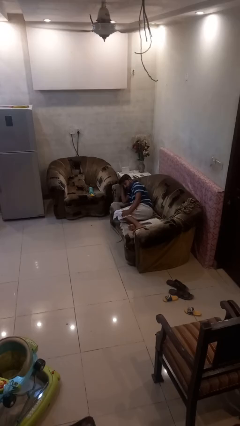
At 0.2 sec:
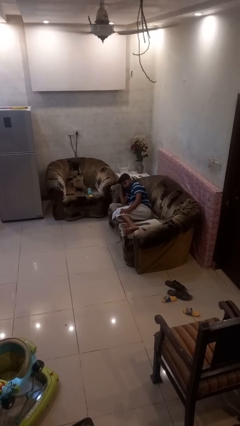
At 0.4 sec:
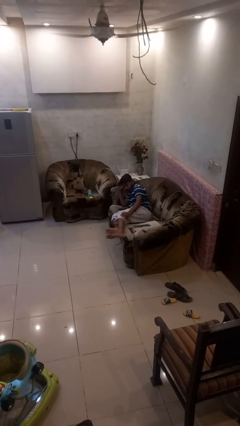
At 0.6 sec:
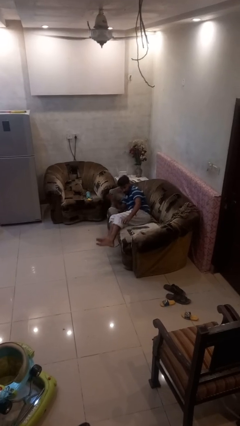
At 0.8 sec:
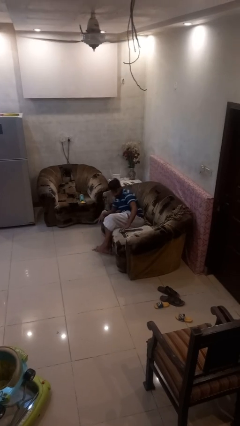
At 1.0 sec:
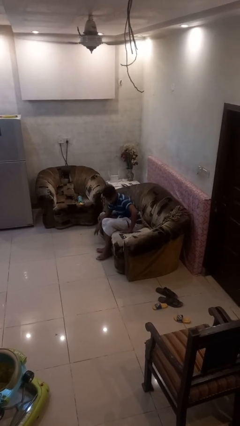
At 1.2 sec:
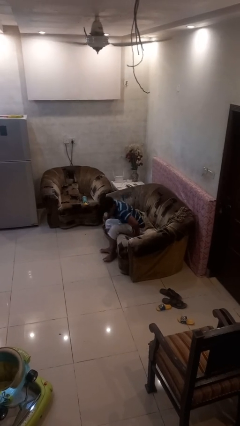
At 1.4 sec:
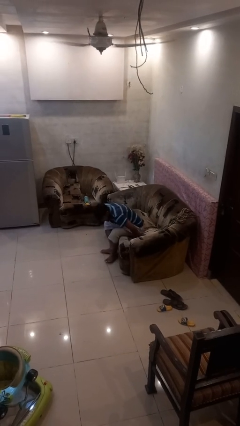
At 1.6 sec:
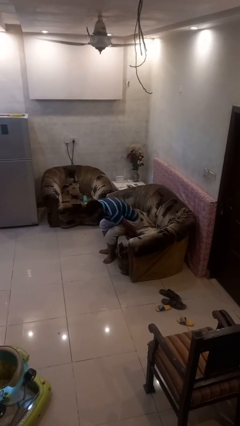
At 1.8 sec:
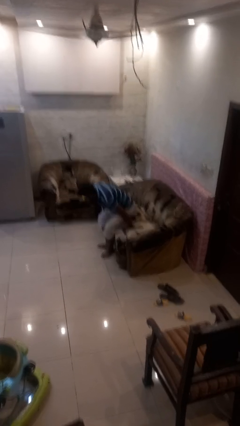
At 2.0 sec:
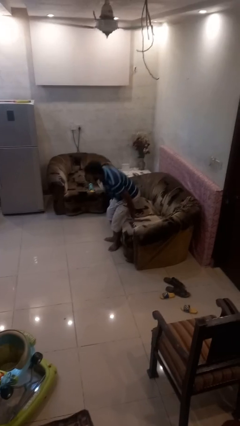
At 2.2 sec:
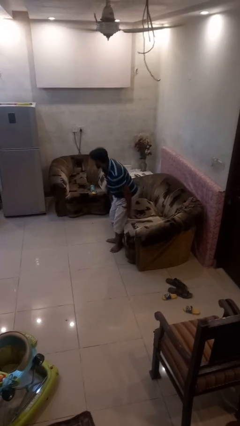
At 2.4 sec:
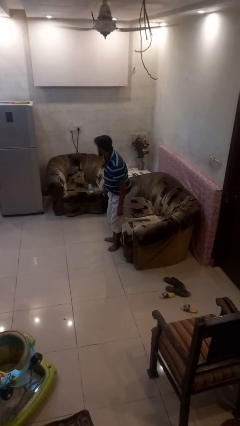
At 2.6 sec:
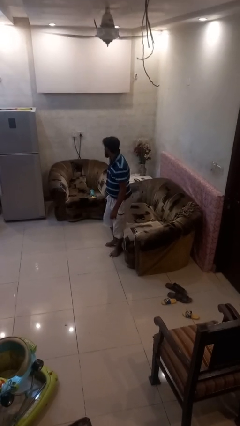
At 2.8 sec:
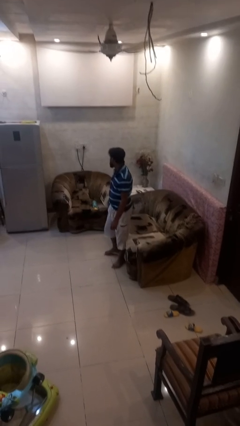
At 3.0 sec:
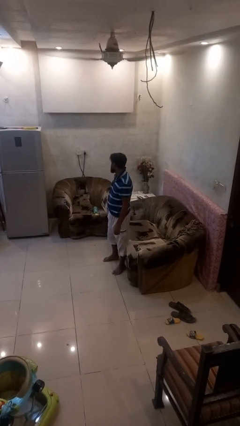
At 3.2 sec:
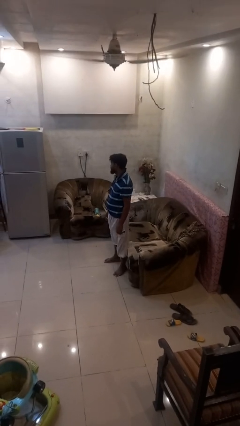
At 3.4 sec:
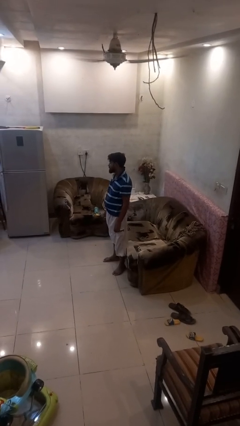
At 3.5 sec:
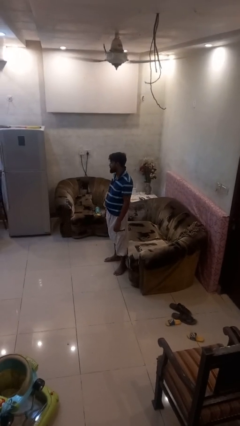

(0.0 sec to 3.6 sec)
person stands up

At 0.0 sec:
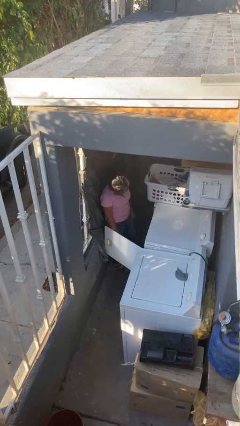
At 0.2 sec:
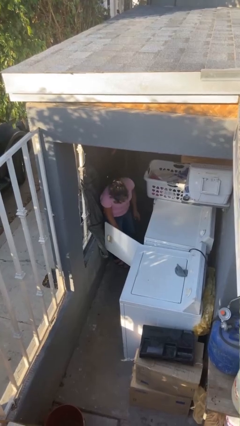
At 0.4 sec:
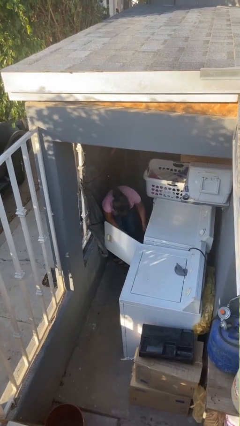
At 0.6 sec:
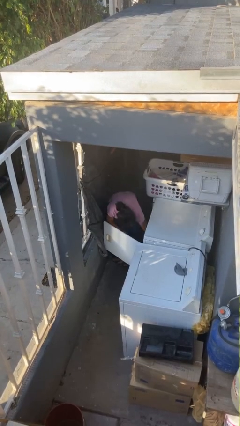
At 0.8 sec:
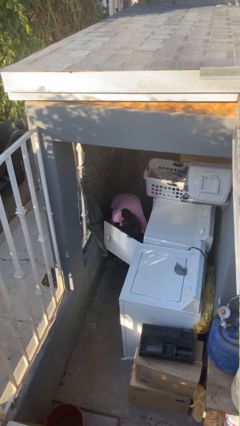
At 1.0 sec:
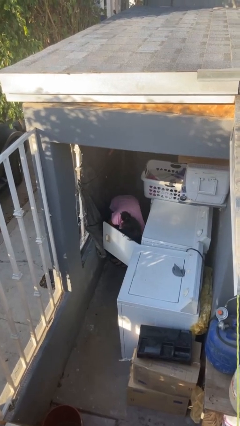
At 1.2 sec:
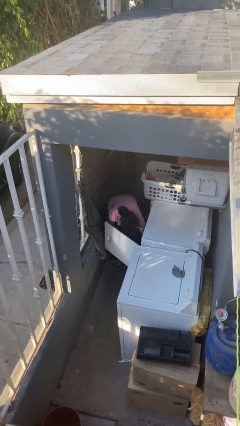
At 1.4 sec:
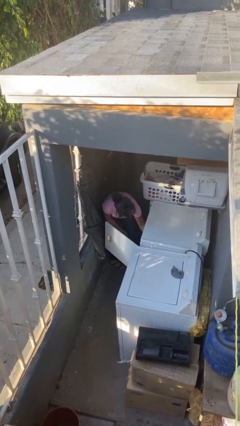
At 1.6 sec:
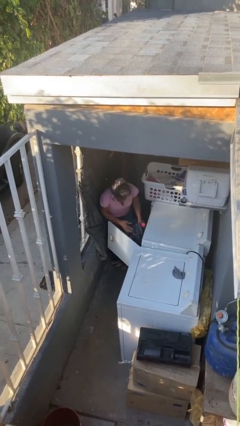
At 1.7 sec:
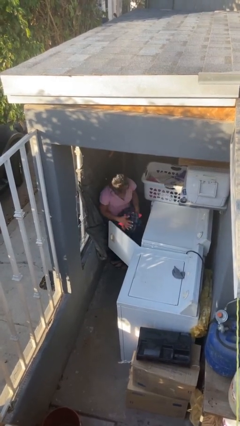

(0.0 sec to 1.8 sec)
person unloads dryer

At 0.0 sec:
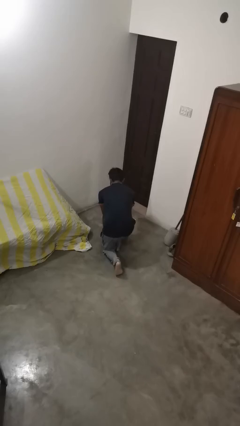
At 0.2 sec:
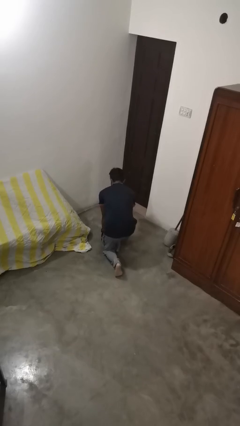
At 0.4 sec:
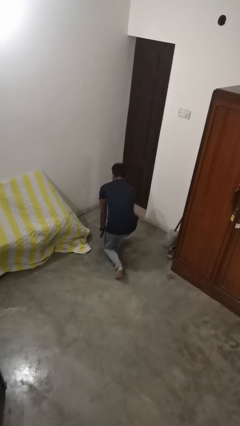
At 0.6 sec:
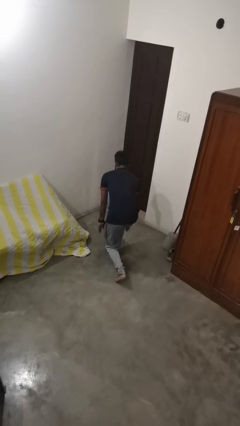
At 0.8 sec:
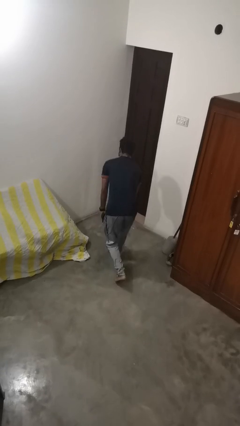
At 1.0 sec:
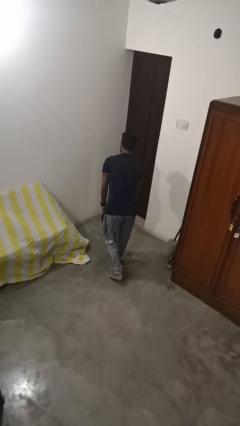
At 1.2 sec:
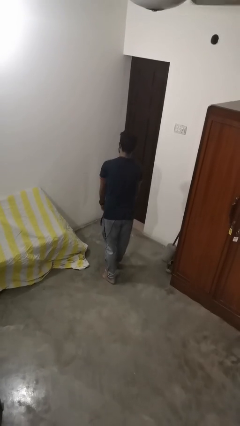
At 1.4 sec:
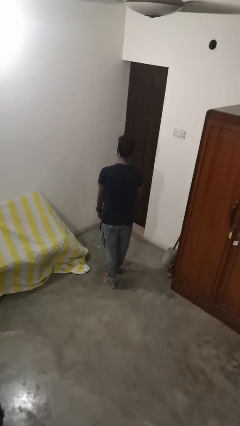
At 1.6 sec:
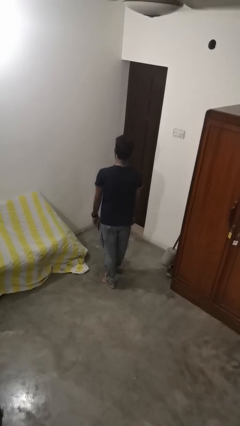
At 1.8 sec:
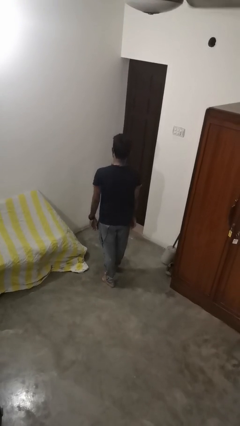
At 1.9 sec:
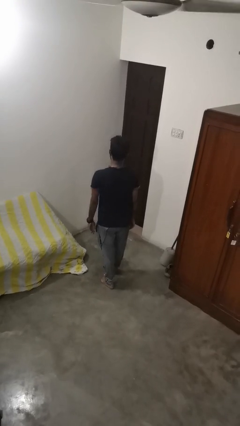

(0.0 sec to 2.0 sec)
person stands up from floor

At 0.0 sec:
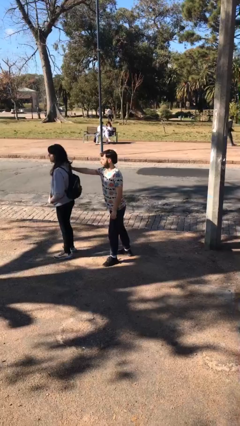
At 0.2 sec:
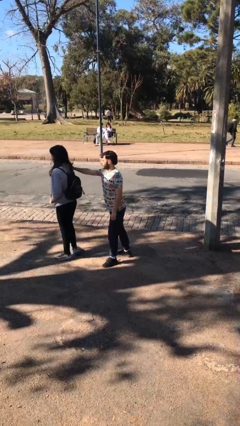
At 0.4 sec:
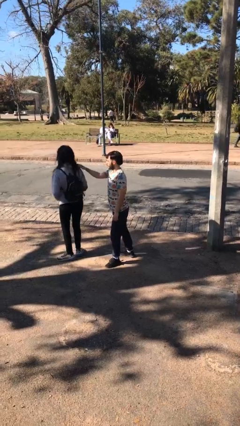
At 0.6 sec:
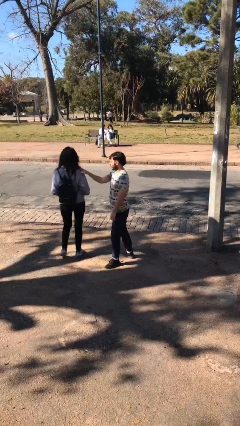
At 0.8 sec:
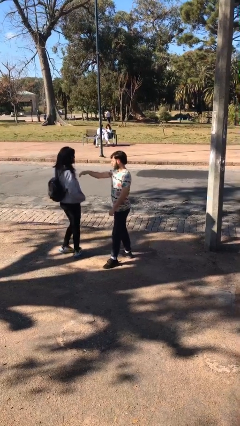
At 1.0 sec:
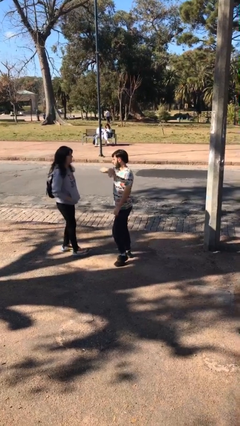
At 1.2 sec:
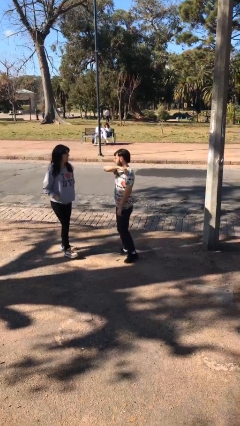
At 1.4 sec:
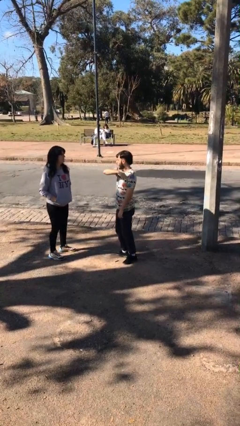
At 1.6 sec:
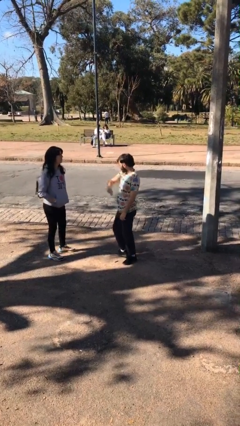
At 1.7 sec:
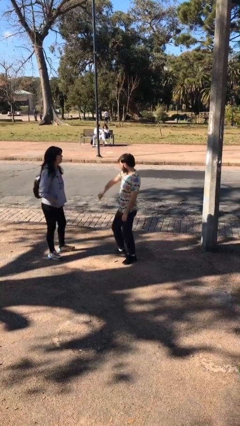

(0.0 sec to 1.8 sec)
person spins person around

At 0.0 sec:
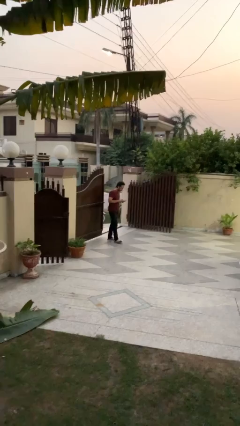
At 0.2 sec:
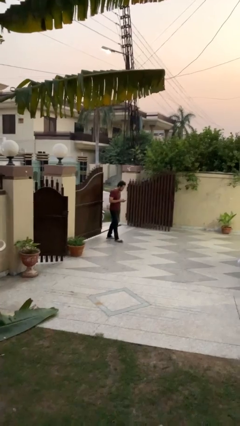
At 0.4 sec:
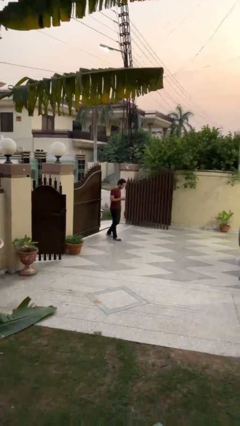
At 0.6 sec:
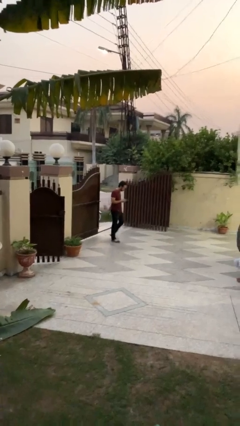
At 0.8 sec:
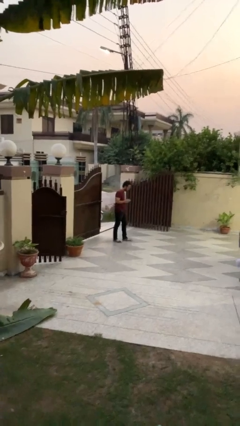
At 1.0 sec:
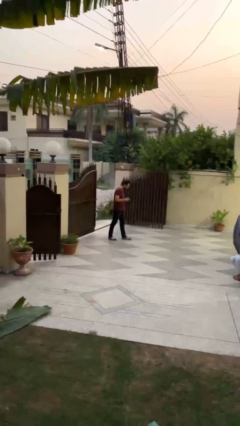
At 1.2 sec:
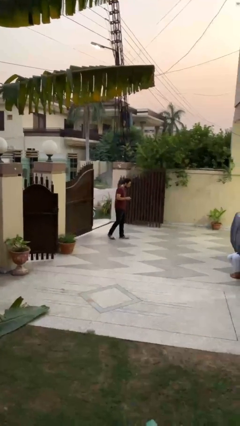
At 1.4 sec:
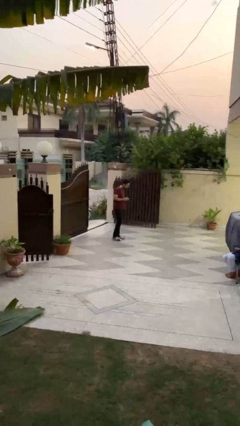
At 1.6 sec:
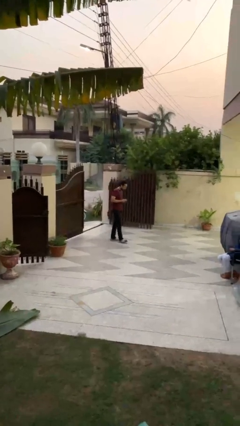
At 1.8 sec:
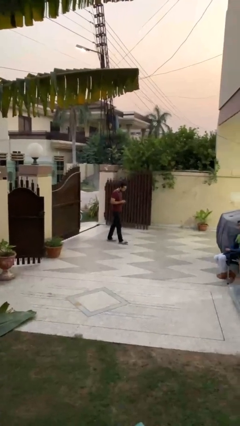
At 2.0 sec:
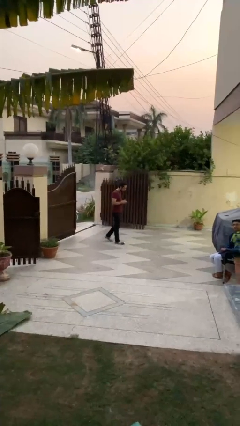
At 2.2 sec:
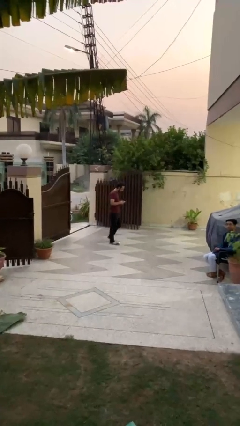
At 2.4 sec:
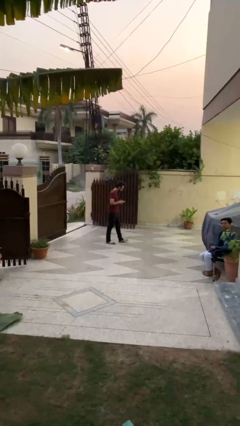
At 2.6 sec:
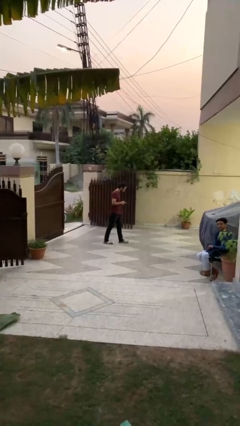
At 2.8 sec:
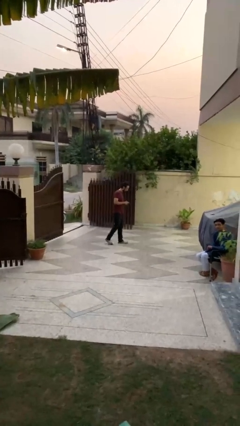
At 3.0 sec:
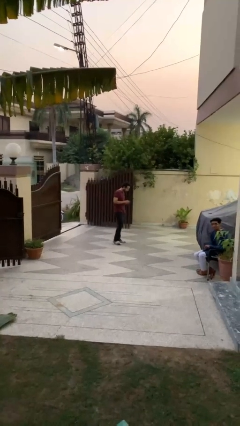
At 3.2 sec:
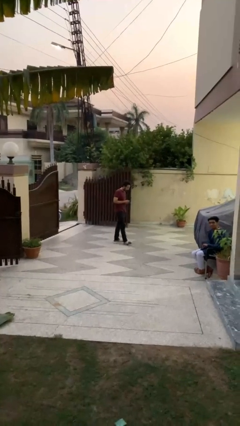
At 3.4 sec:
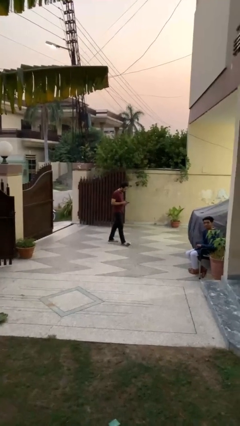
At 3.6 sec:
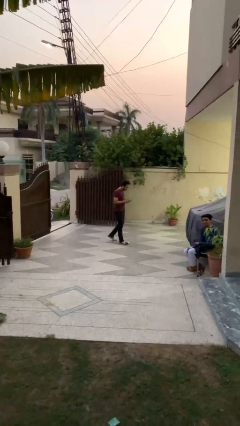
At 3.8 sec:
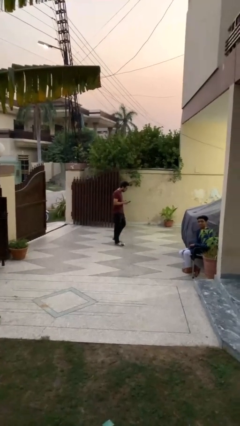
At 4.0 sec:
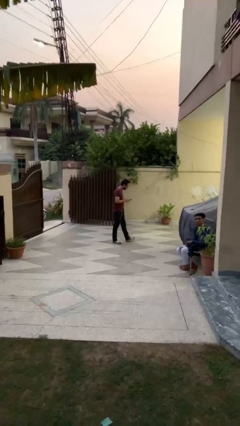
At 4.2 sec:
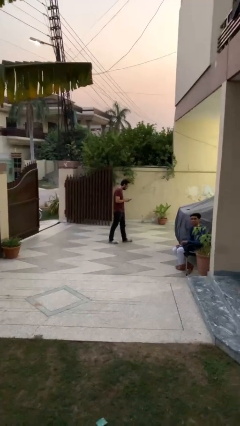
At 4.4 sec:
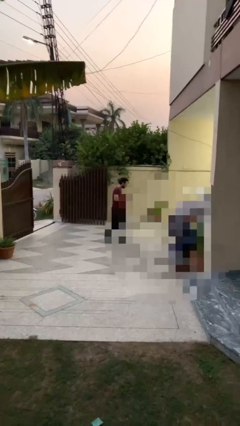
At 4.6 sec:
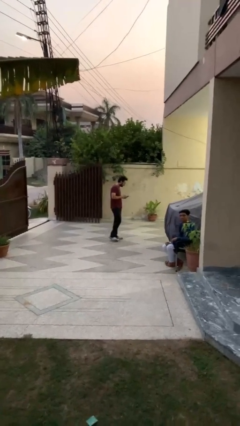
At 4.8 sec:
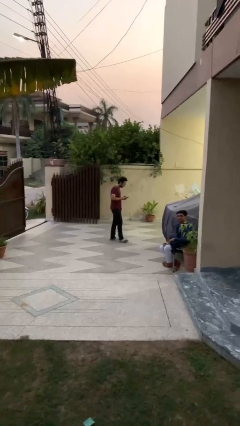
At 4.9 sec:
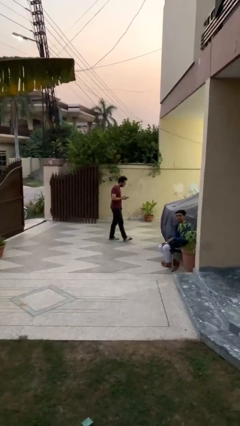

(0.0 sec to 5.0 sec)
person texts on phone

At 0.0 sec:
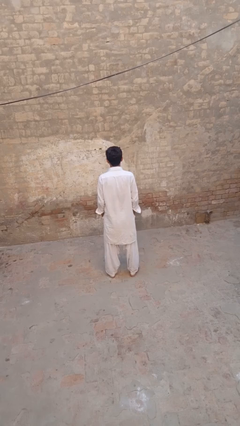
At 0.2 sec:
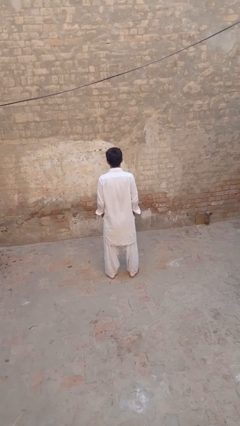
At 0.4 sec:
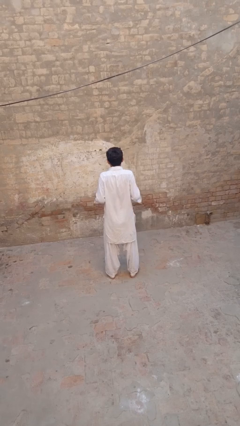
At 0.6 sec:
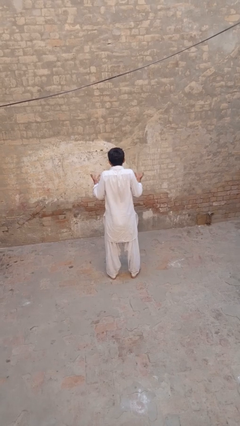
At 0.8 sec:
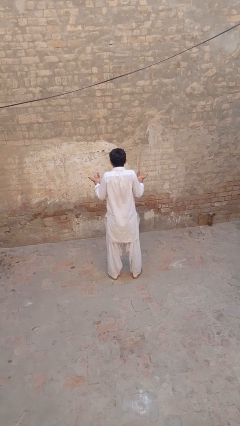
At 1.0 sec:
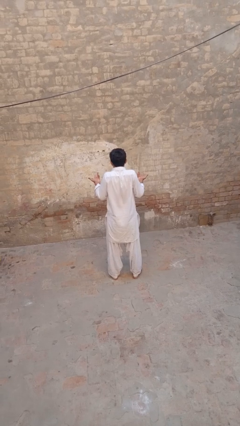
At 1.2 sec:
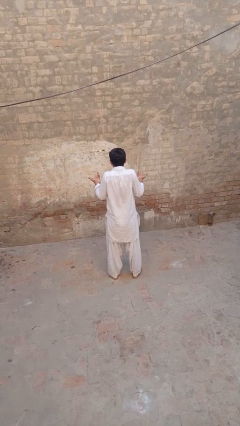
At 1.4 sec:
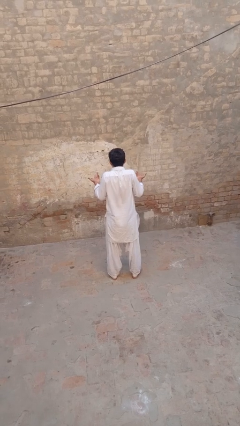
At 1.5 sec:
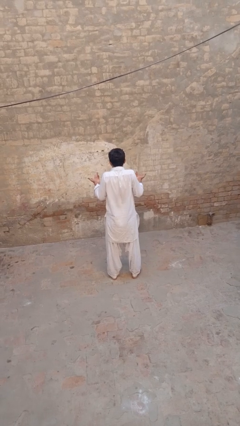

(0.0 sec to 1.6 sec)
person shrugs

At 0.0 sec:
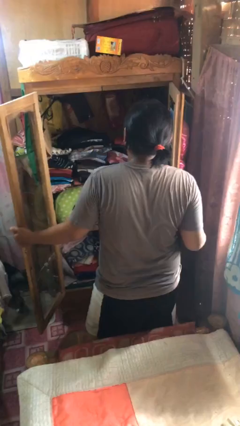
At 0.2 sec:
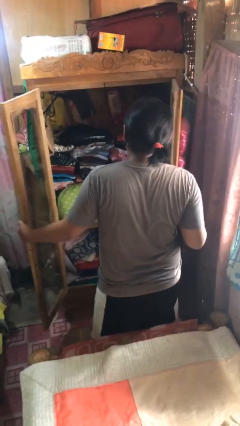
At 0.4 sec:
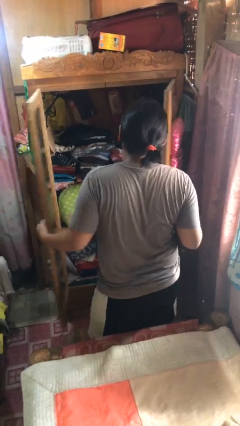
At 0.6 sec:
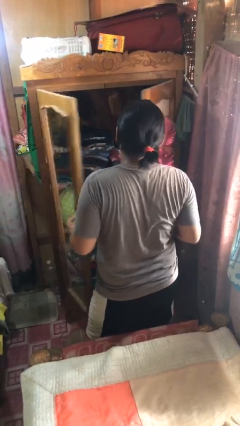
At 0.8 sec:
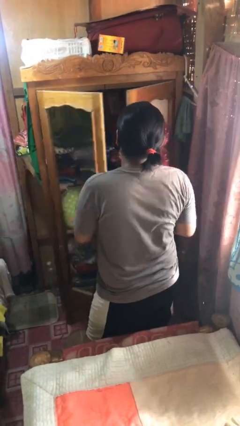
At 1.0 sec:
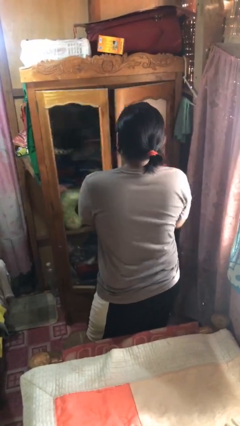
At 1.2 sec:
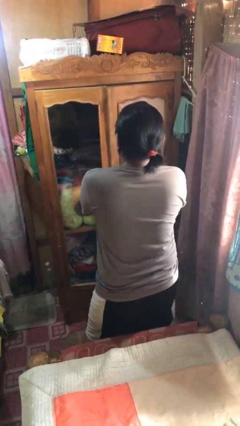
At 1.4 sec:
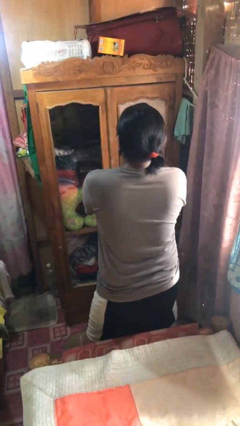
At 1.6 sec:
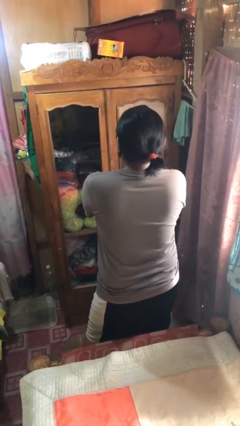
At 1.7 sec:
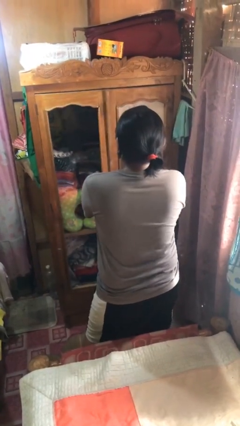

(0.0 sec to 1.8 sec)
person closes closet door
